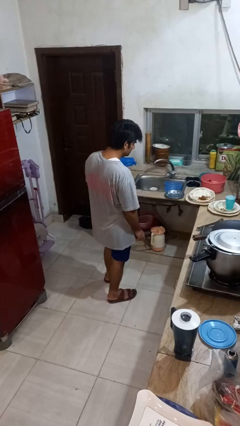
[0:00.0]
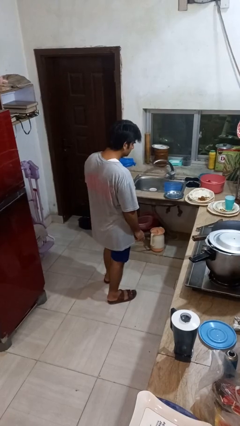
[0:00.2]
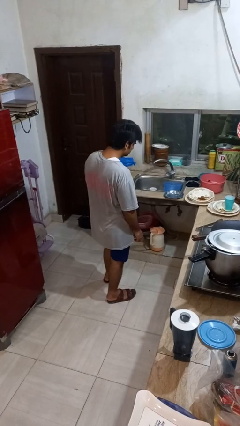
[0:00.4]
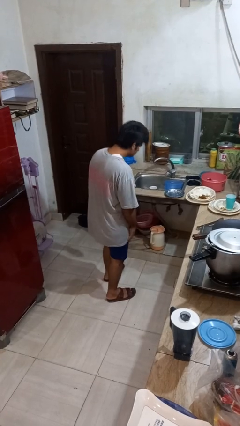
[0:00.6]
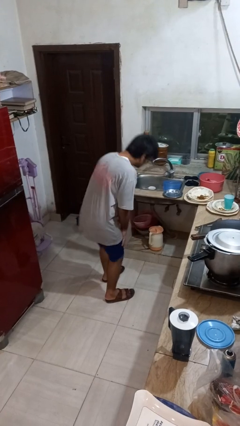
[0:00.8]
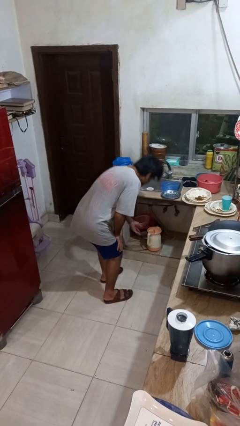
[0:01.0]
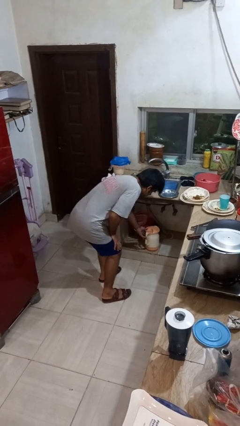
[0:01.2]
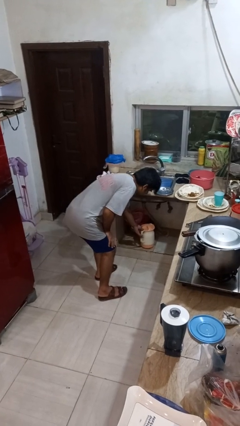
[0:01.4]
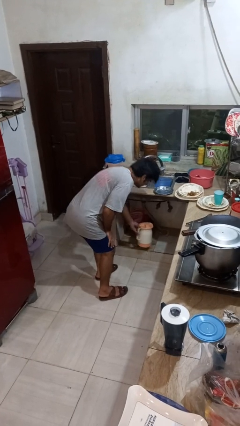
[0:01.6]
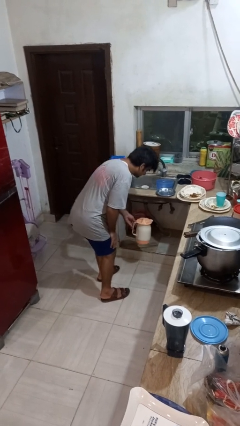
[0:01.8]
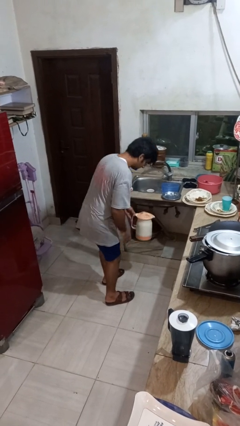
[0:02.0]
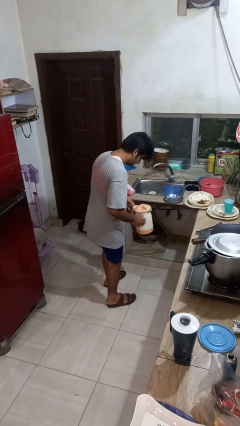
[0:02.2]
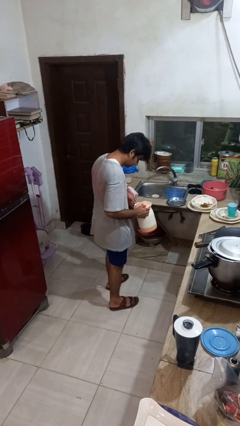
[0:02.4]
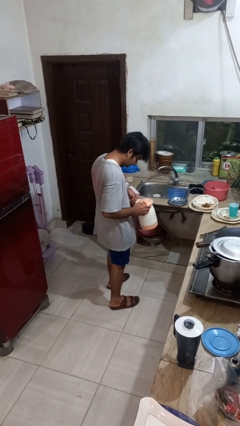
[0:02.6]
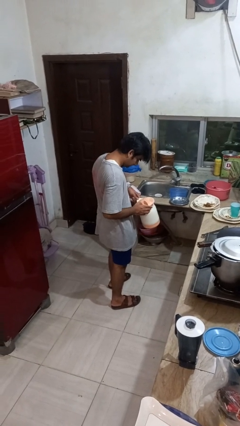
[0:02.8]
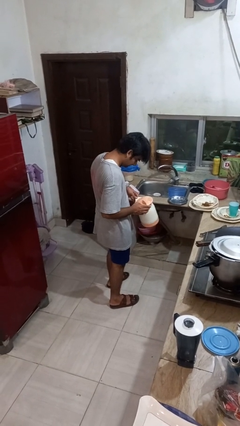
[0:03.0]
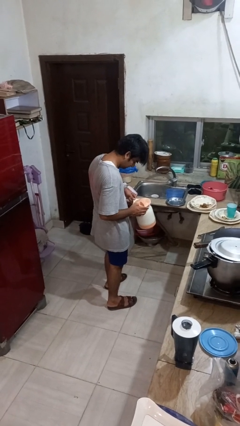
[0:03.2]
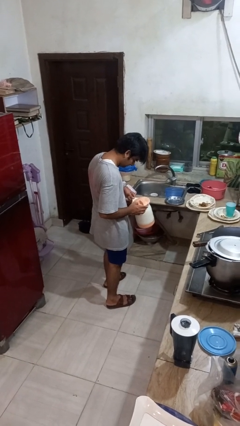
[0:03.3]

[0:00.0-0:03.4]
person picks up object from cabinet

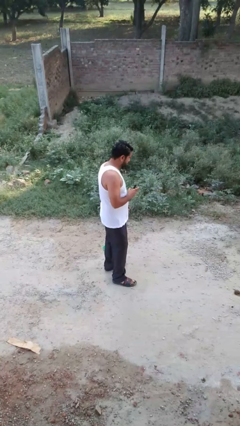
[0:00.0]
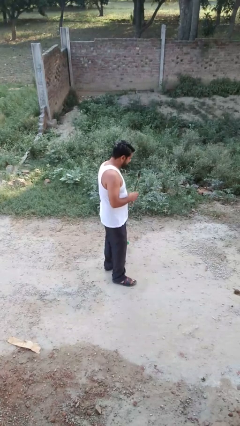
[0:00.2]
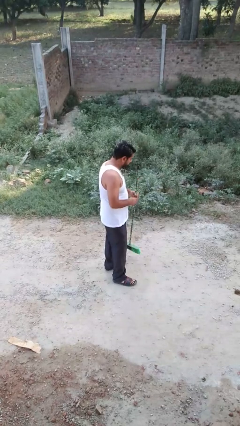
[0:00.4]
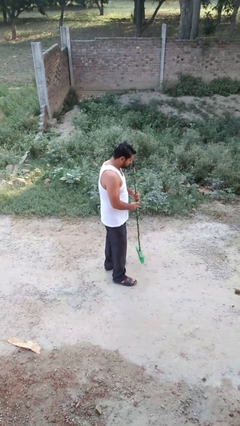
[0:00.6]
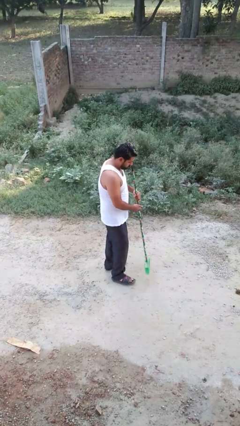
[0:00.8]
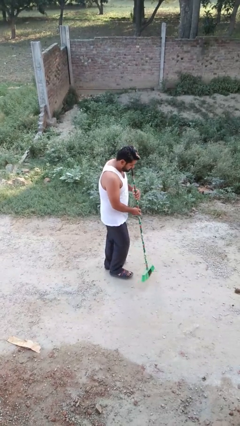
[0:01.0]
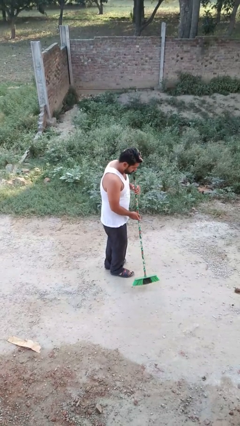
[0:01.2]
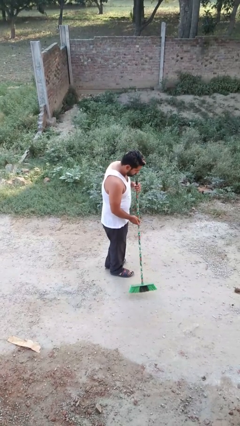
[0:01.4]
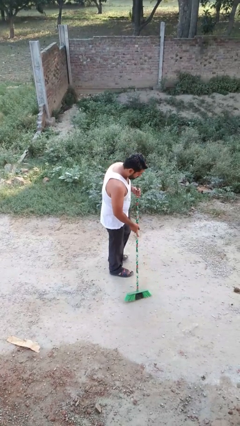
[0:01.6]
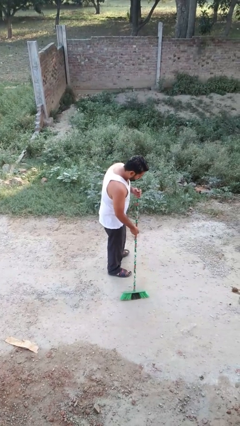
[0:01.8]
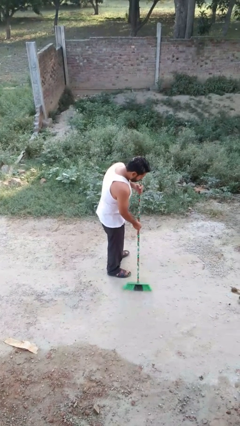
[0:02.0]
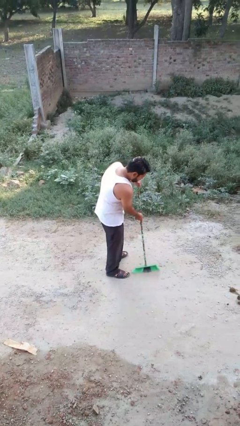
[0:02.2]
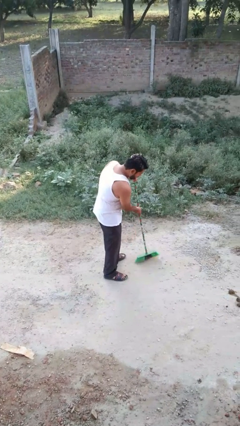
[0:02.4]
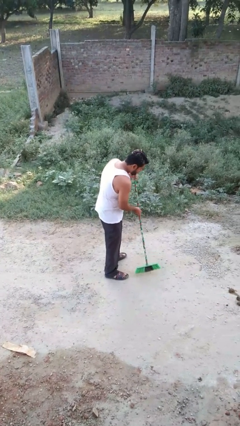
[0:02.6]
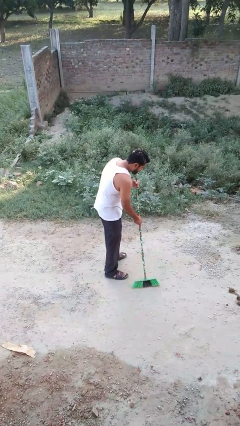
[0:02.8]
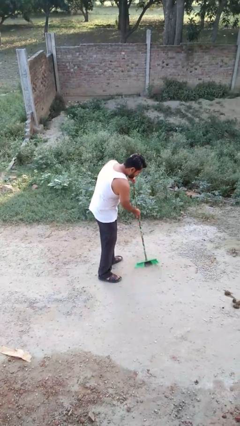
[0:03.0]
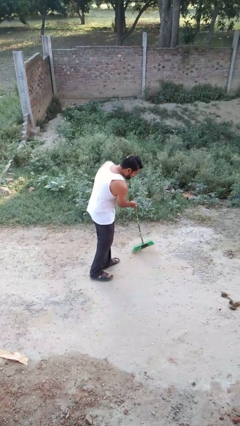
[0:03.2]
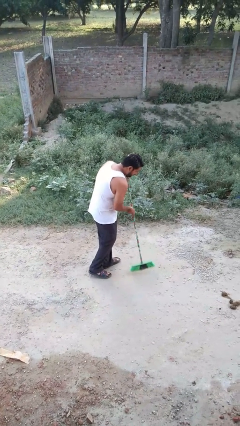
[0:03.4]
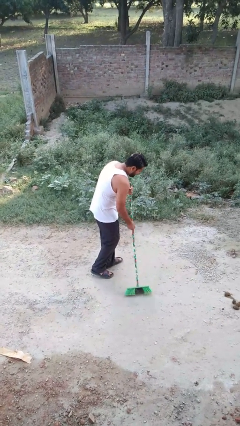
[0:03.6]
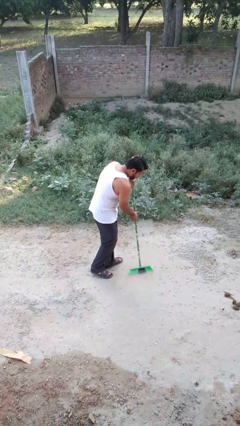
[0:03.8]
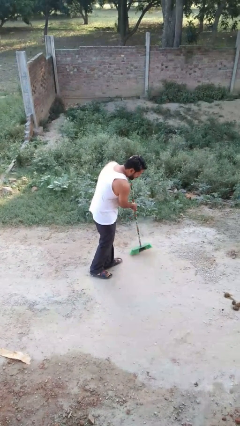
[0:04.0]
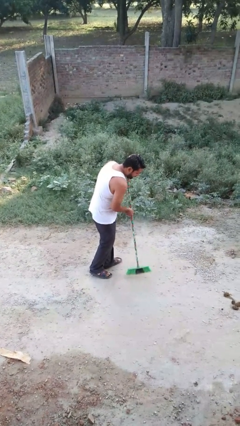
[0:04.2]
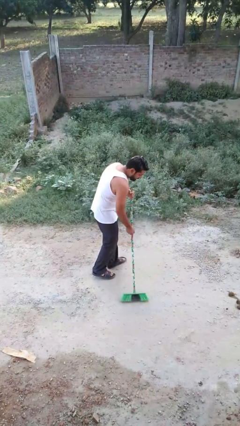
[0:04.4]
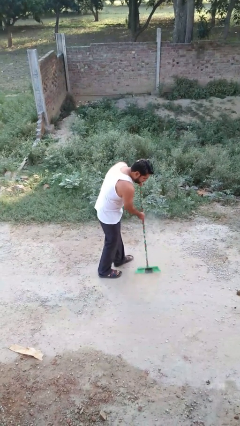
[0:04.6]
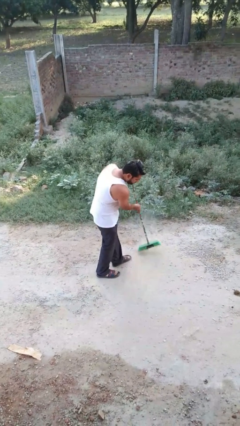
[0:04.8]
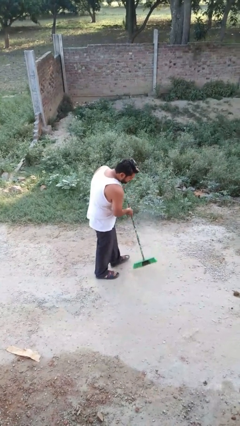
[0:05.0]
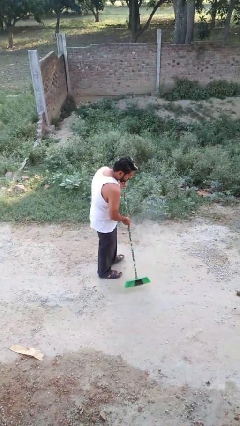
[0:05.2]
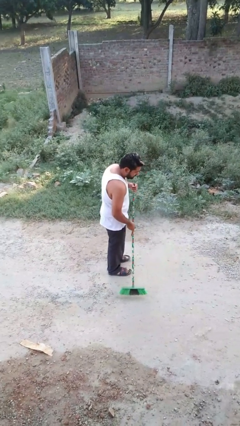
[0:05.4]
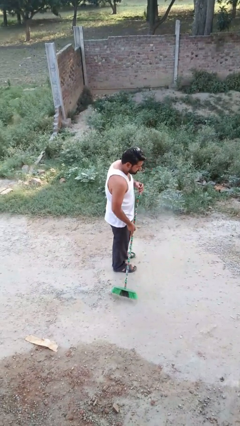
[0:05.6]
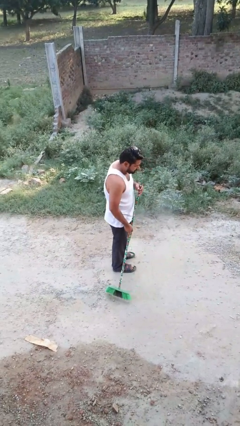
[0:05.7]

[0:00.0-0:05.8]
person sweeps floor

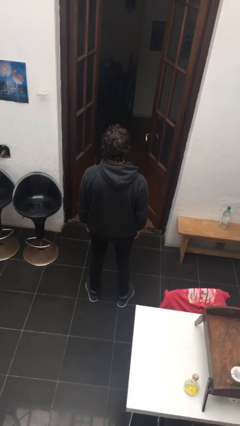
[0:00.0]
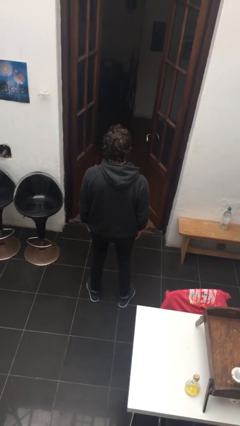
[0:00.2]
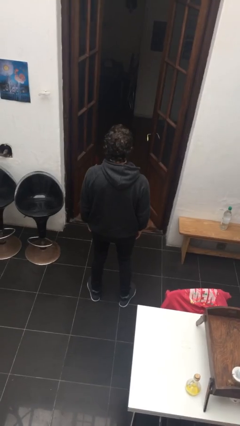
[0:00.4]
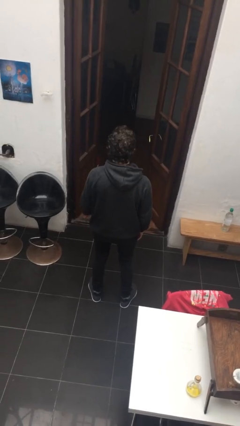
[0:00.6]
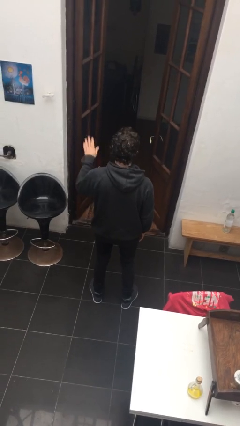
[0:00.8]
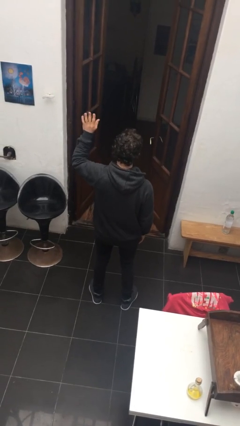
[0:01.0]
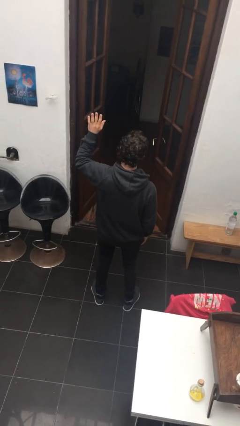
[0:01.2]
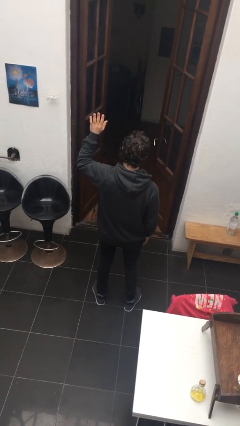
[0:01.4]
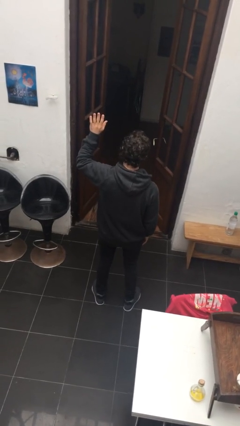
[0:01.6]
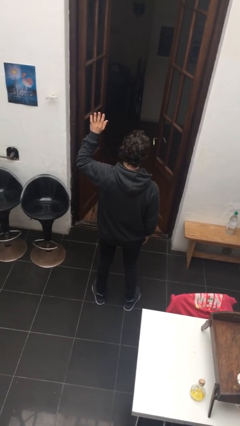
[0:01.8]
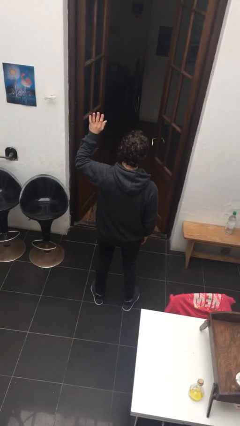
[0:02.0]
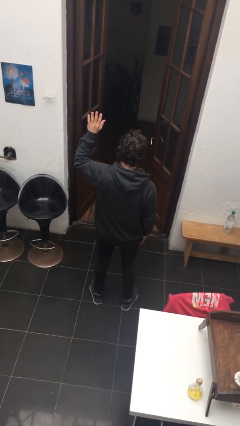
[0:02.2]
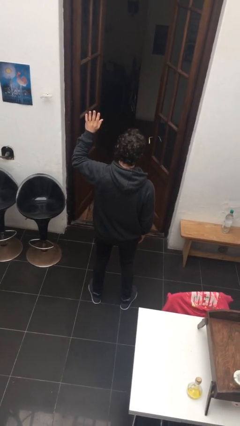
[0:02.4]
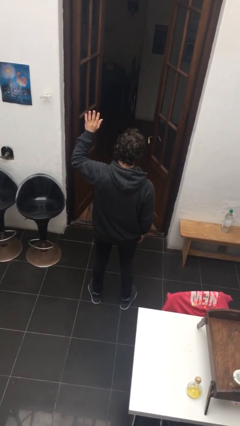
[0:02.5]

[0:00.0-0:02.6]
person gestures raise hand

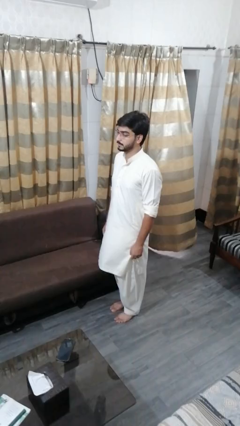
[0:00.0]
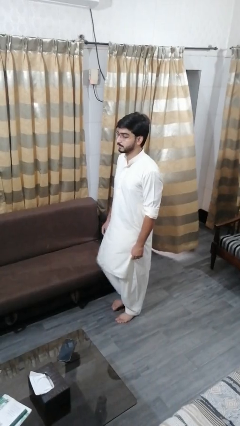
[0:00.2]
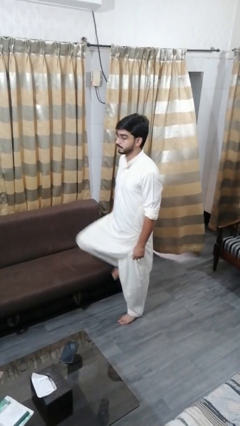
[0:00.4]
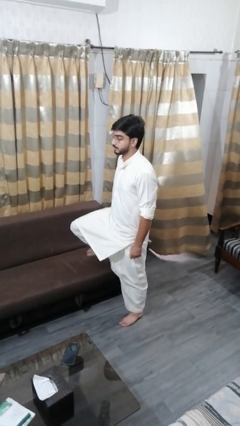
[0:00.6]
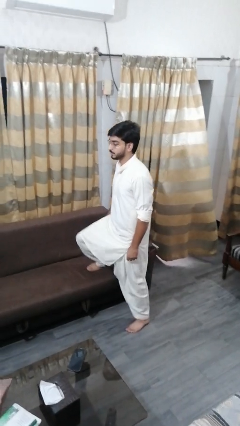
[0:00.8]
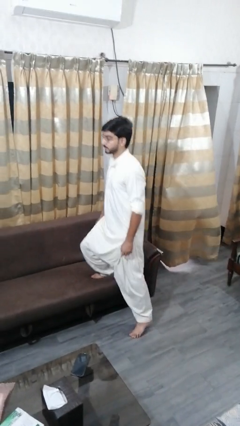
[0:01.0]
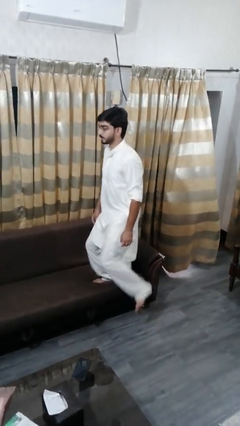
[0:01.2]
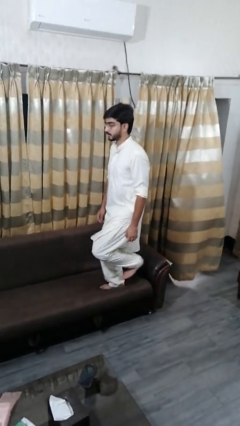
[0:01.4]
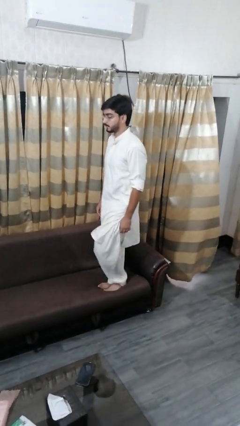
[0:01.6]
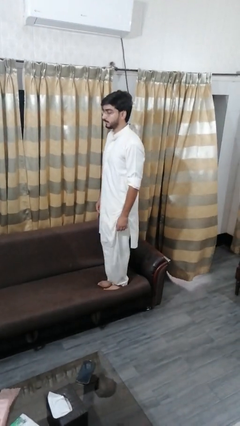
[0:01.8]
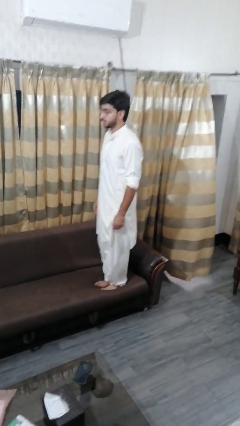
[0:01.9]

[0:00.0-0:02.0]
person climbs on couch

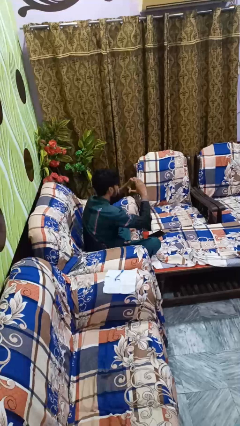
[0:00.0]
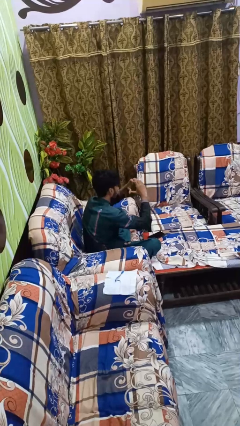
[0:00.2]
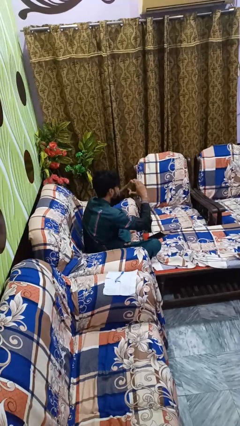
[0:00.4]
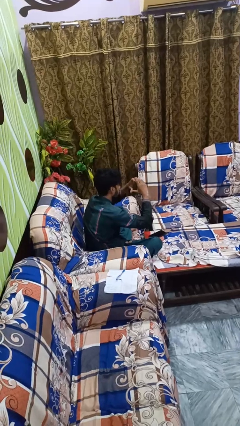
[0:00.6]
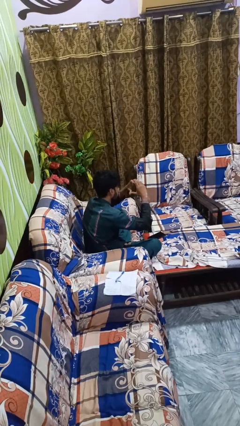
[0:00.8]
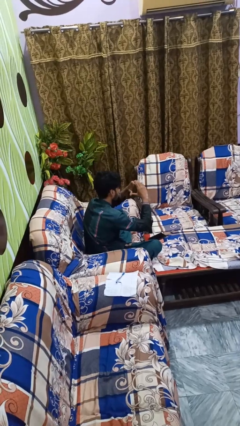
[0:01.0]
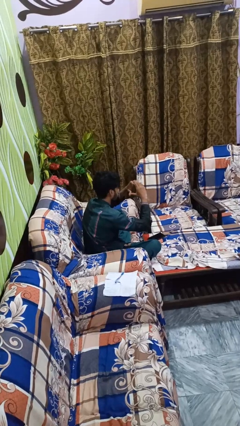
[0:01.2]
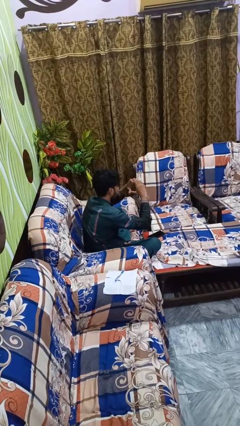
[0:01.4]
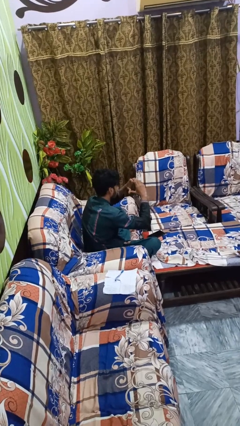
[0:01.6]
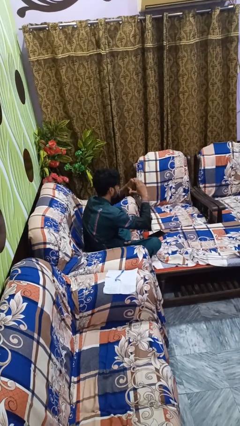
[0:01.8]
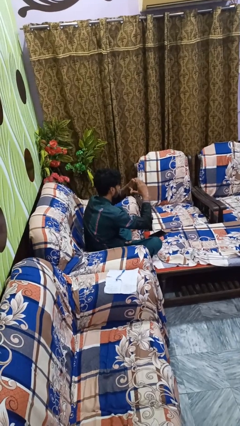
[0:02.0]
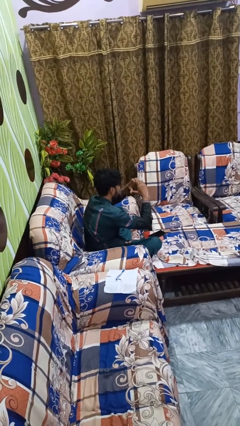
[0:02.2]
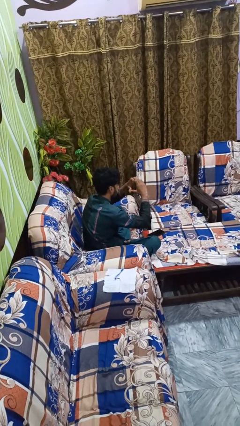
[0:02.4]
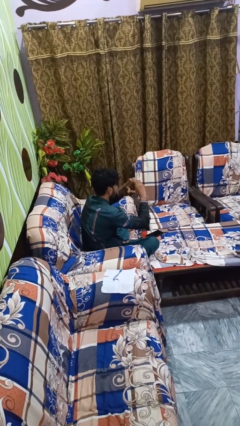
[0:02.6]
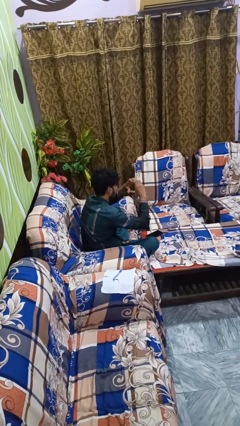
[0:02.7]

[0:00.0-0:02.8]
person gestures heart

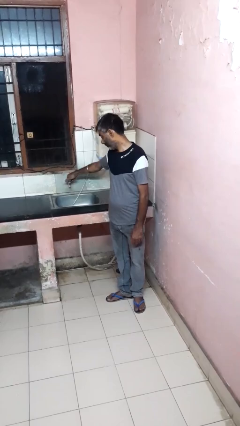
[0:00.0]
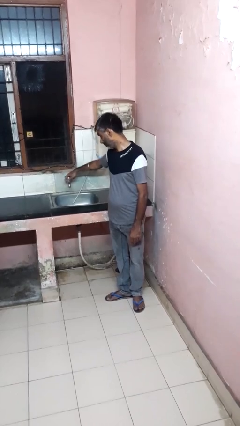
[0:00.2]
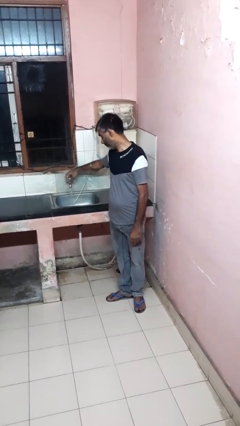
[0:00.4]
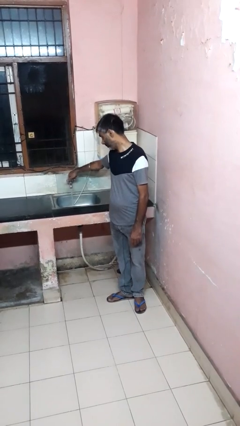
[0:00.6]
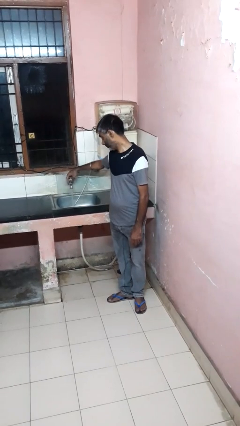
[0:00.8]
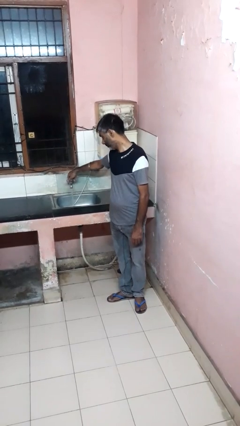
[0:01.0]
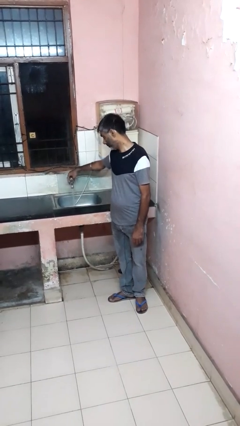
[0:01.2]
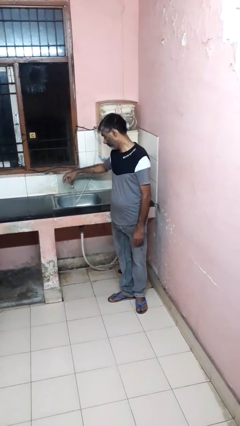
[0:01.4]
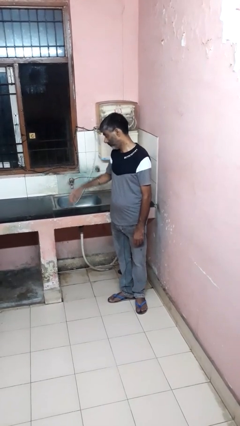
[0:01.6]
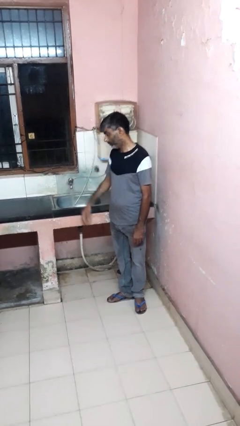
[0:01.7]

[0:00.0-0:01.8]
person turns on faucet
